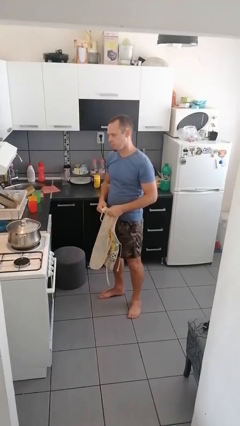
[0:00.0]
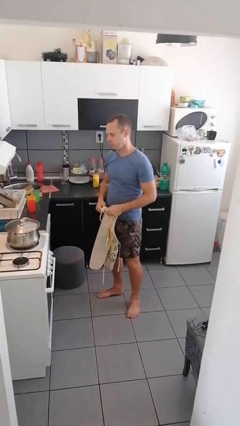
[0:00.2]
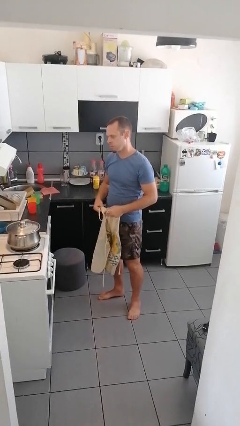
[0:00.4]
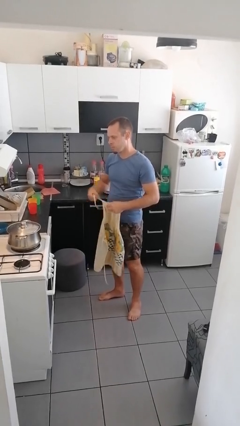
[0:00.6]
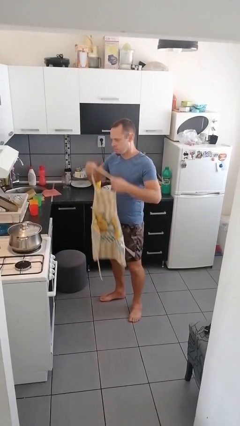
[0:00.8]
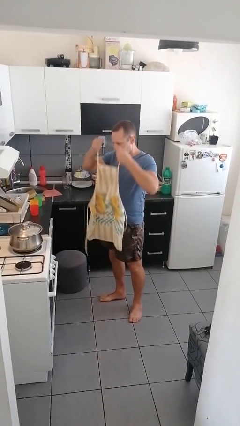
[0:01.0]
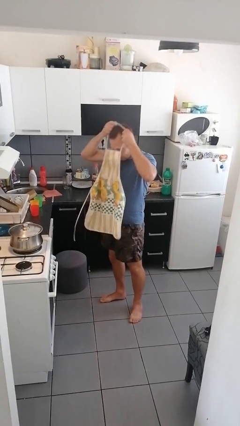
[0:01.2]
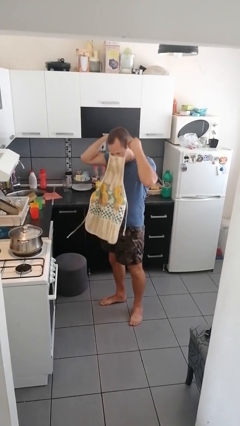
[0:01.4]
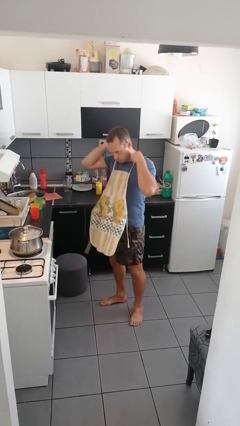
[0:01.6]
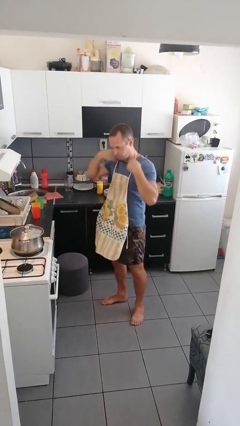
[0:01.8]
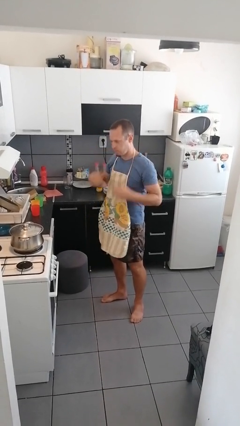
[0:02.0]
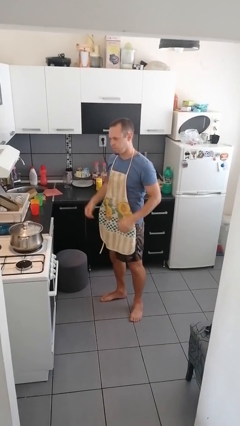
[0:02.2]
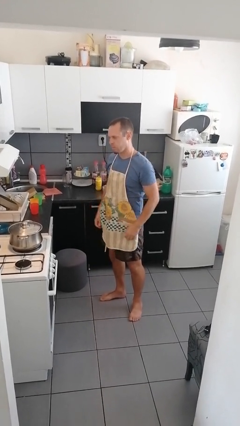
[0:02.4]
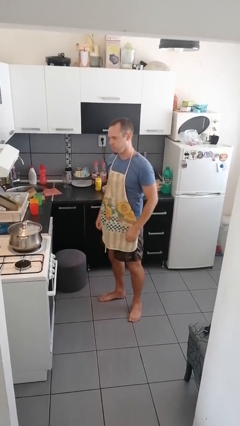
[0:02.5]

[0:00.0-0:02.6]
person puts on apron

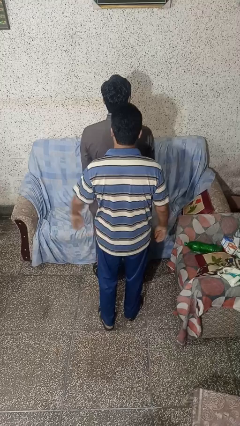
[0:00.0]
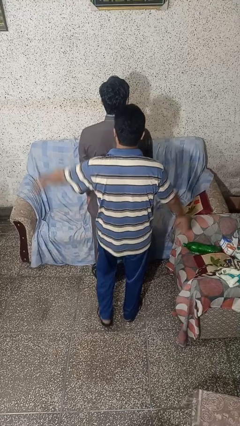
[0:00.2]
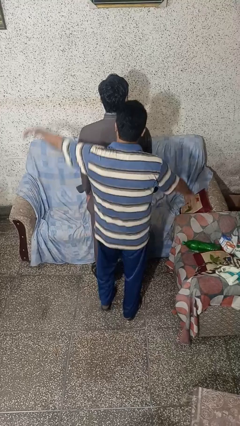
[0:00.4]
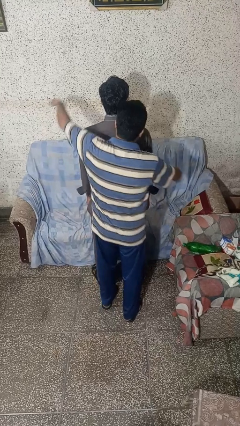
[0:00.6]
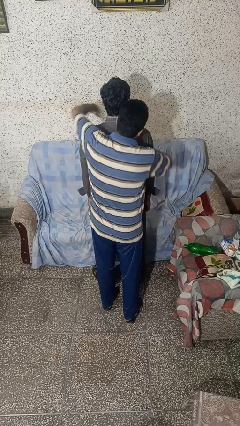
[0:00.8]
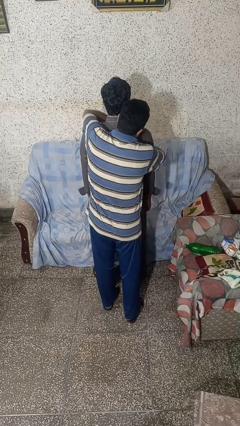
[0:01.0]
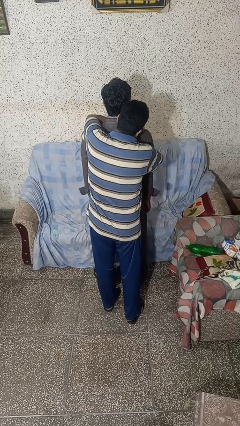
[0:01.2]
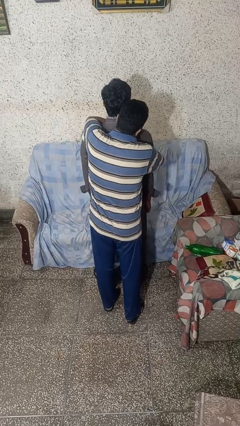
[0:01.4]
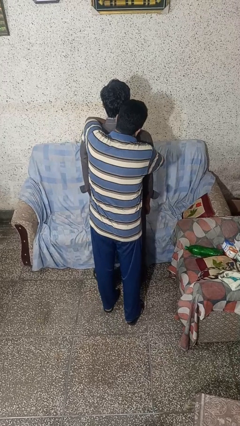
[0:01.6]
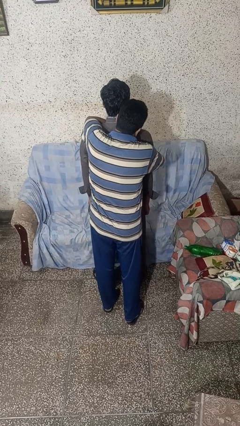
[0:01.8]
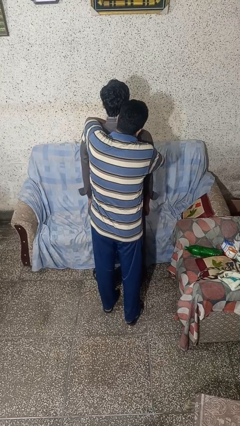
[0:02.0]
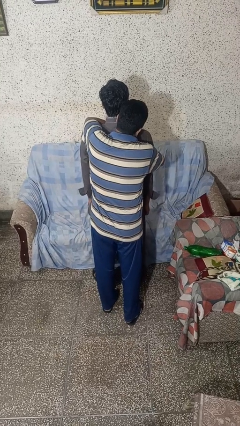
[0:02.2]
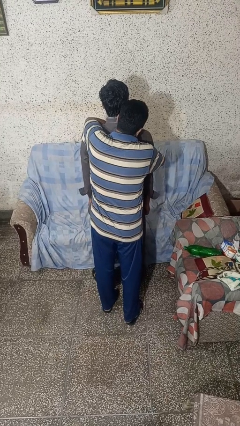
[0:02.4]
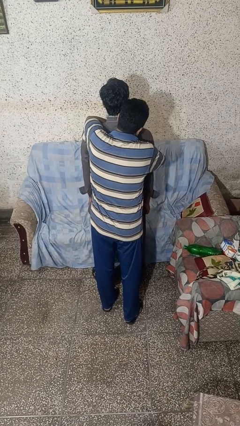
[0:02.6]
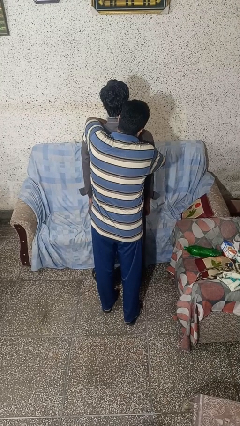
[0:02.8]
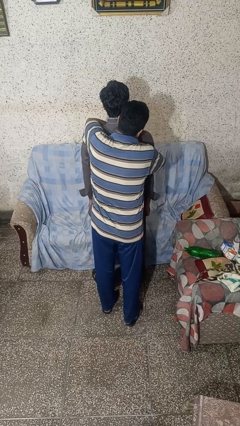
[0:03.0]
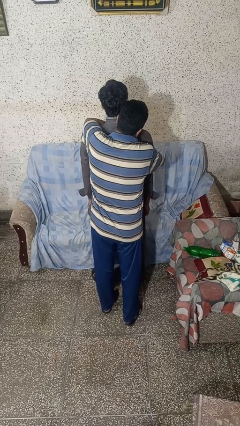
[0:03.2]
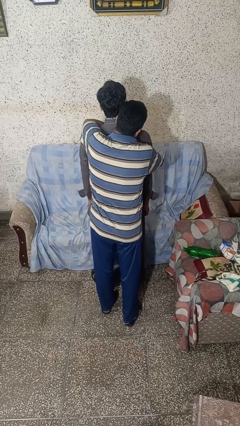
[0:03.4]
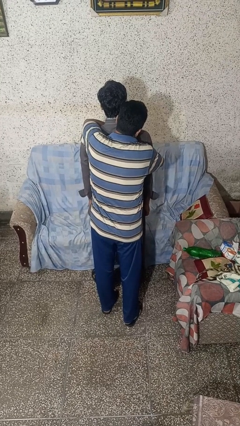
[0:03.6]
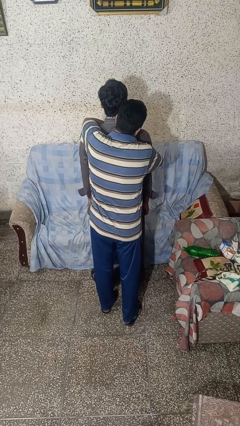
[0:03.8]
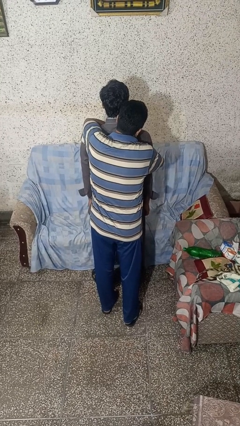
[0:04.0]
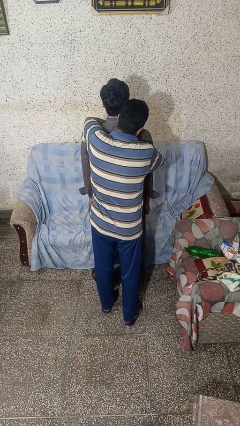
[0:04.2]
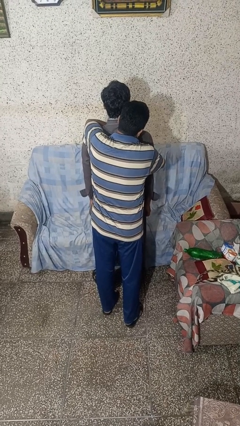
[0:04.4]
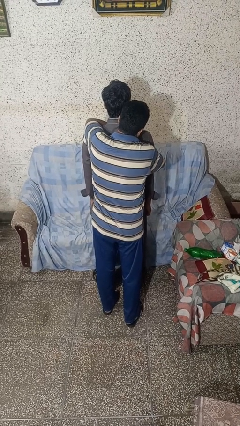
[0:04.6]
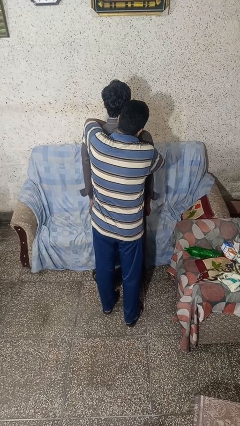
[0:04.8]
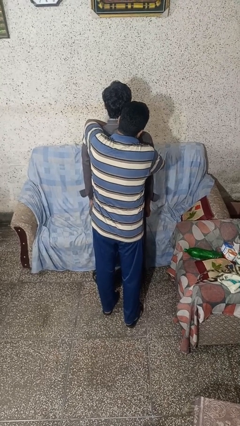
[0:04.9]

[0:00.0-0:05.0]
person hugs person from behind

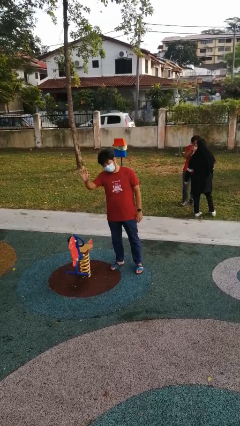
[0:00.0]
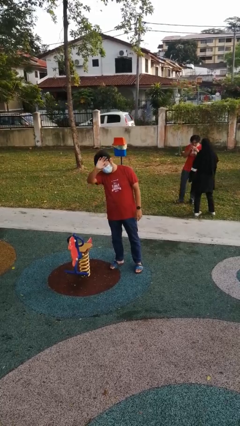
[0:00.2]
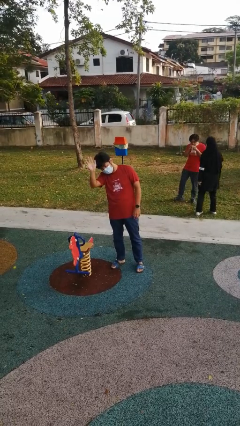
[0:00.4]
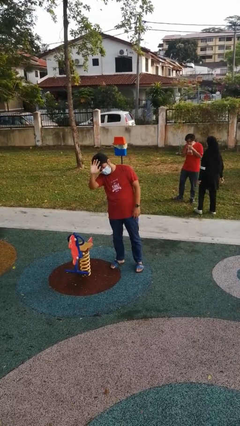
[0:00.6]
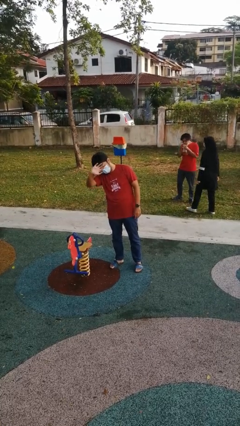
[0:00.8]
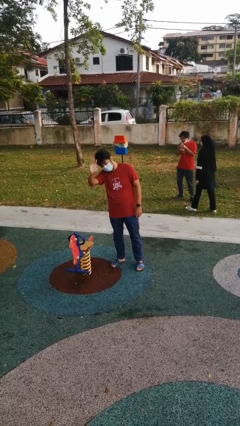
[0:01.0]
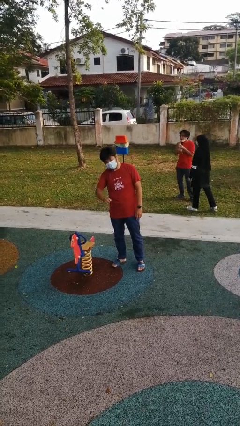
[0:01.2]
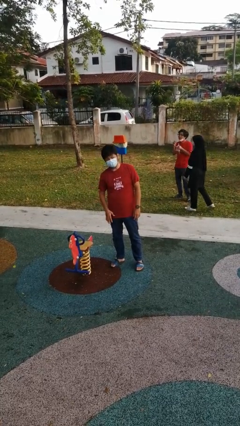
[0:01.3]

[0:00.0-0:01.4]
person waves at person

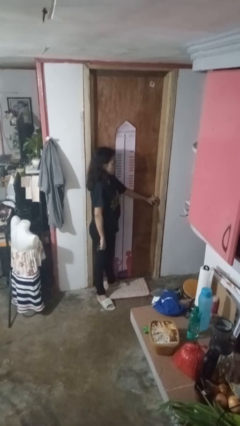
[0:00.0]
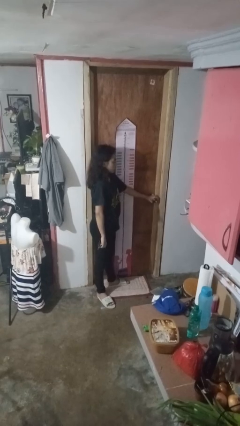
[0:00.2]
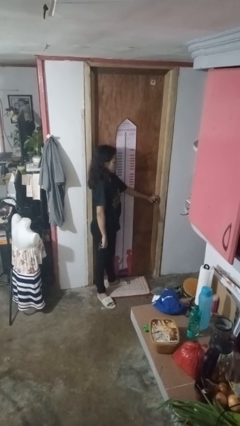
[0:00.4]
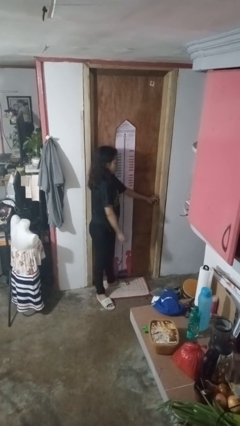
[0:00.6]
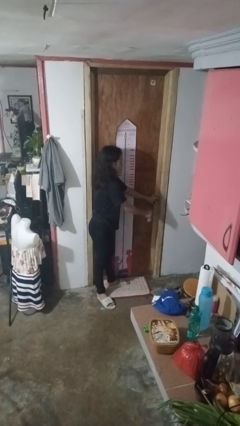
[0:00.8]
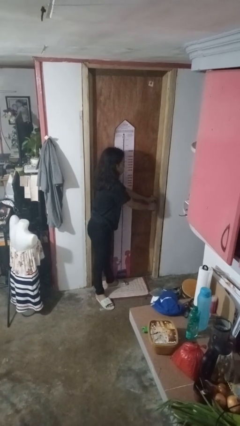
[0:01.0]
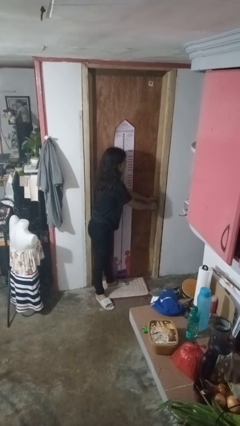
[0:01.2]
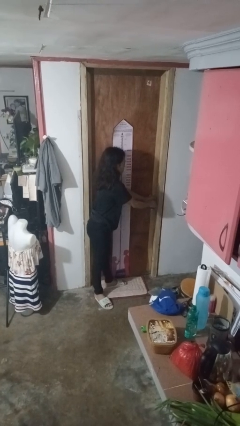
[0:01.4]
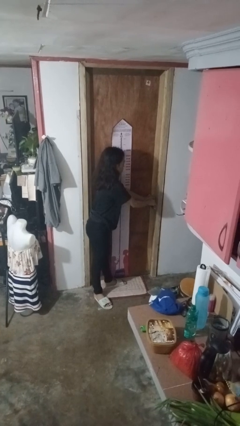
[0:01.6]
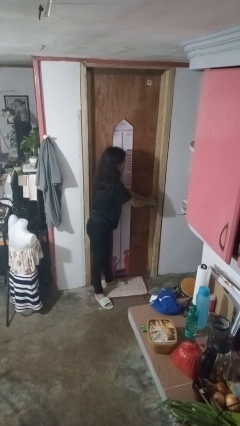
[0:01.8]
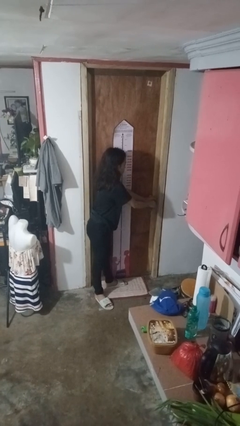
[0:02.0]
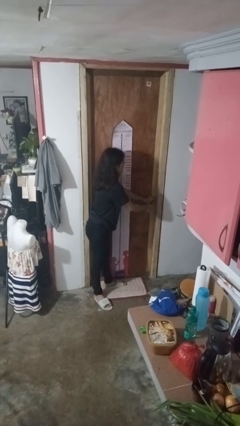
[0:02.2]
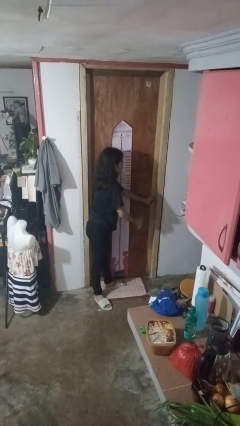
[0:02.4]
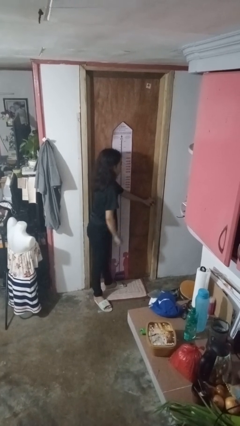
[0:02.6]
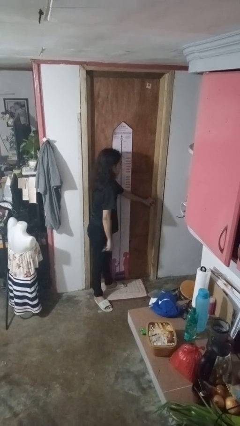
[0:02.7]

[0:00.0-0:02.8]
person unlocks door with keys

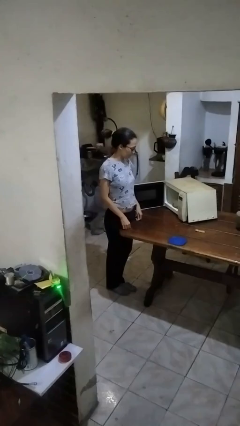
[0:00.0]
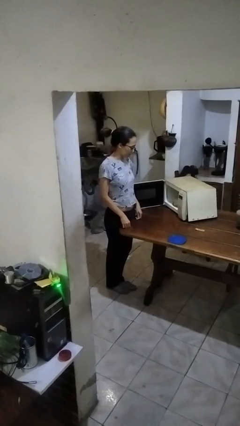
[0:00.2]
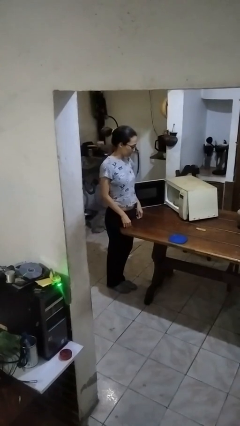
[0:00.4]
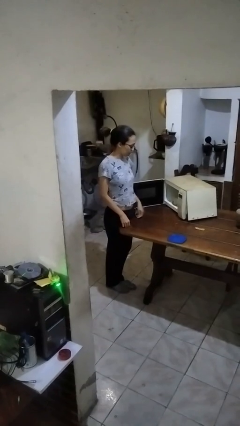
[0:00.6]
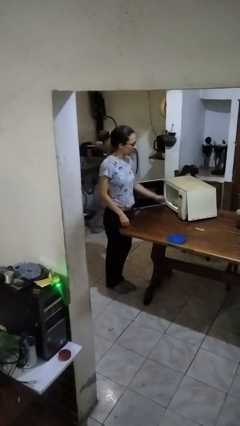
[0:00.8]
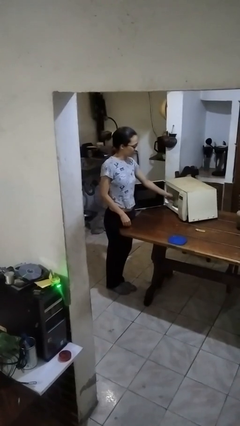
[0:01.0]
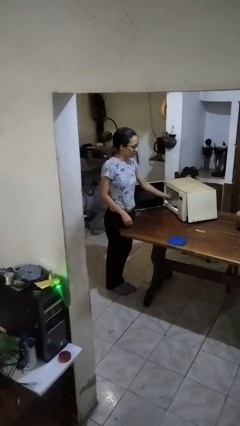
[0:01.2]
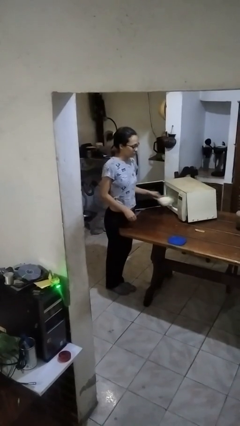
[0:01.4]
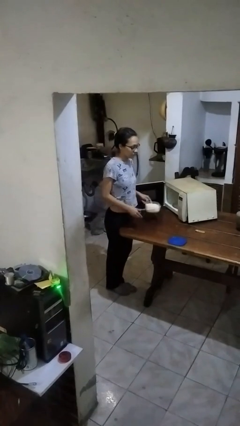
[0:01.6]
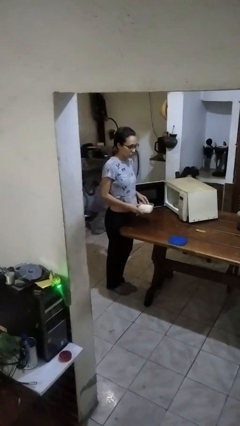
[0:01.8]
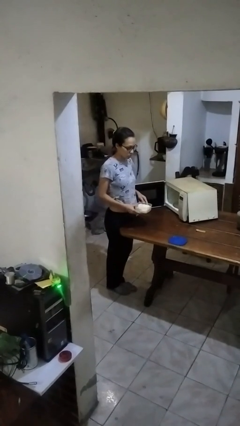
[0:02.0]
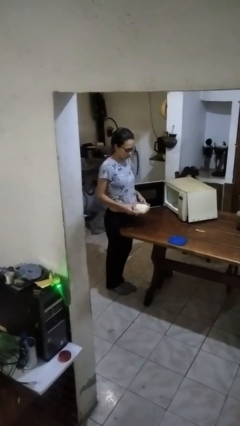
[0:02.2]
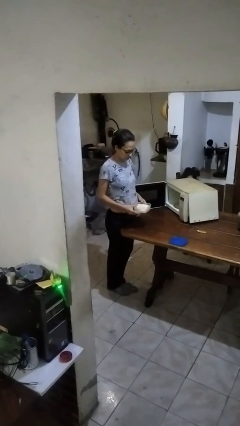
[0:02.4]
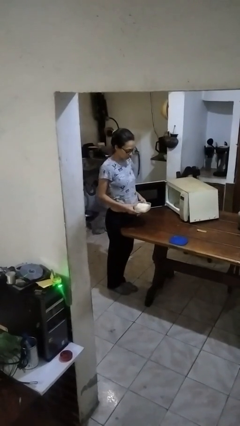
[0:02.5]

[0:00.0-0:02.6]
person takes object from microwave

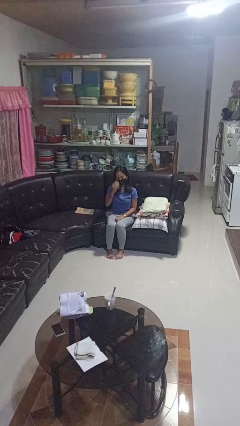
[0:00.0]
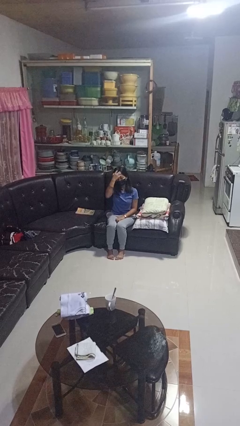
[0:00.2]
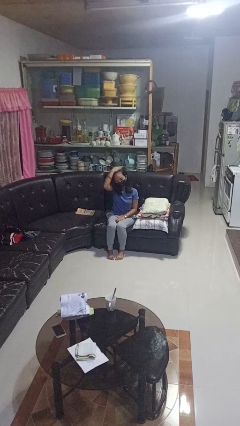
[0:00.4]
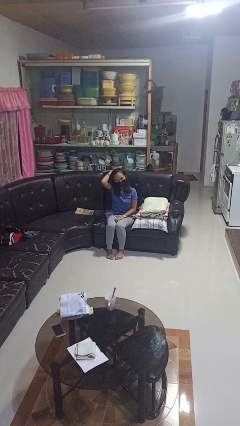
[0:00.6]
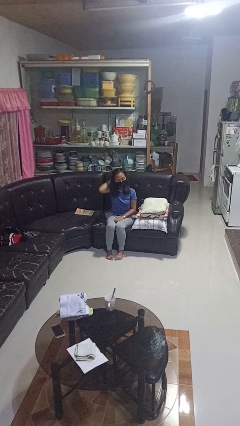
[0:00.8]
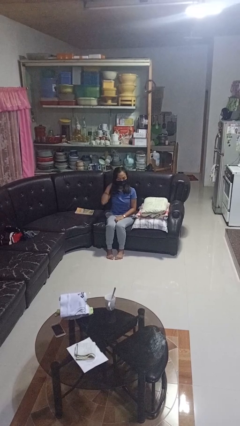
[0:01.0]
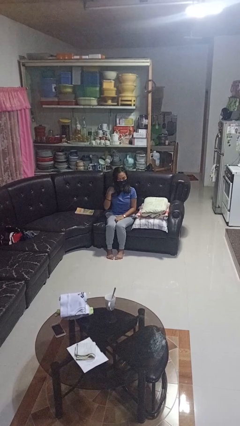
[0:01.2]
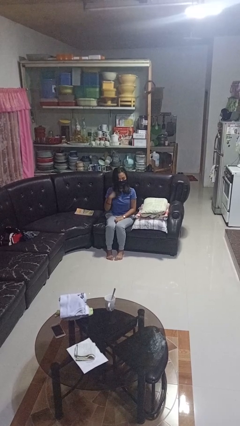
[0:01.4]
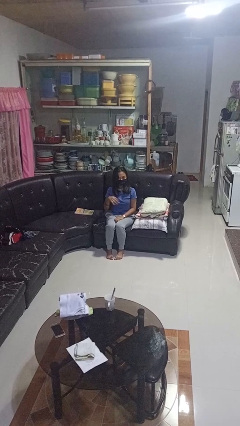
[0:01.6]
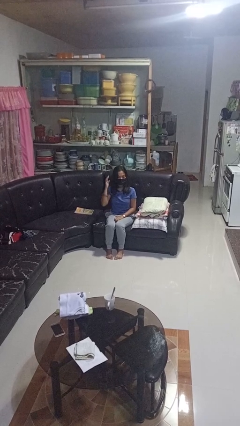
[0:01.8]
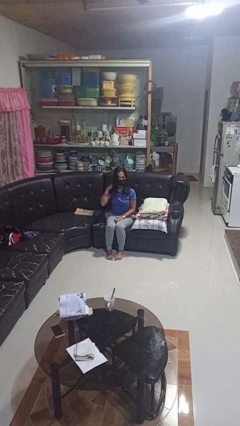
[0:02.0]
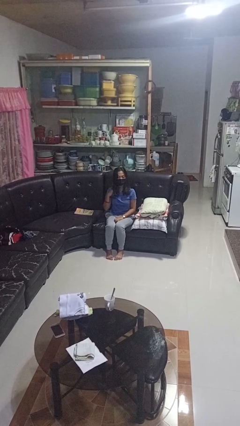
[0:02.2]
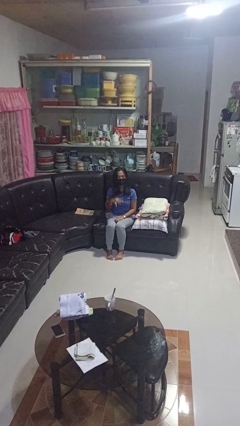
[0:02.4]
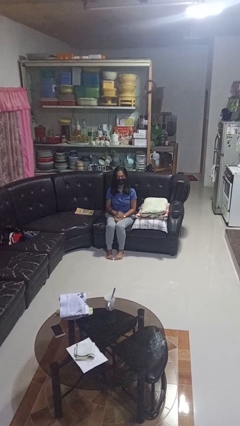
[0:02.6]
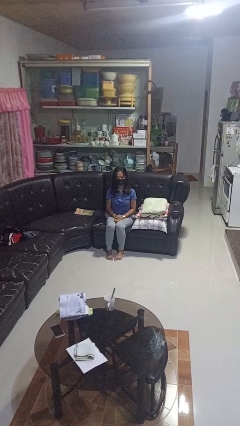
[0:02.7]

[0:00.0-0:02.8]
person strokes hair

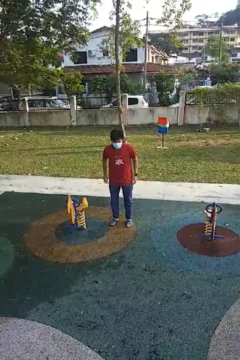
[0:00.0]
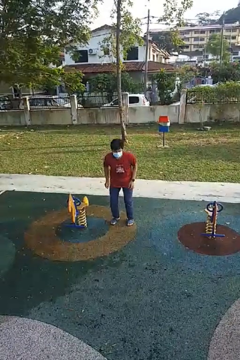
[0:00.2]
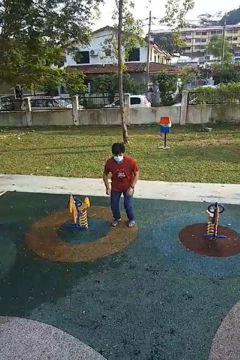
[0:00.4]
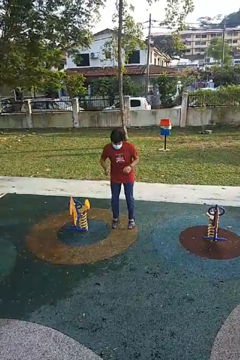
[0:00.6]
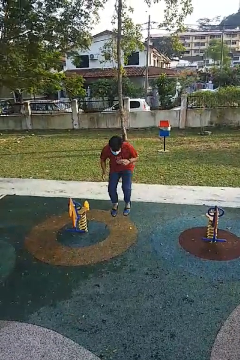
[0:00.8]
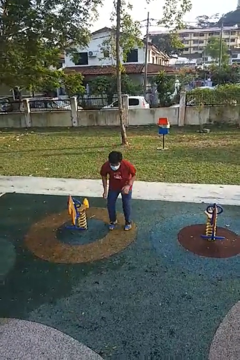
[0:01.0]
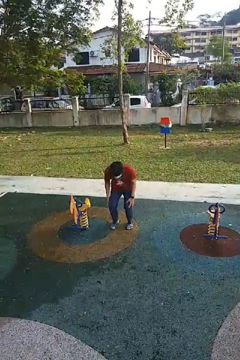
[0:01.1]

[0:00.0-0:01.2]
person jumps
